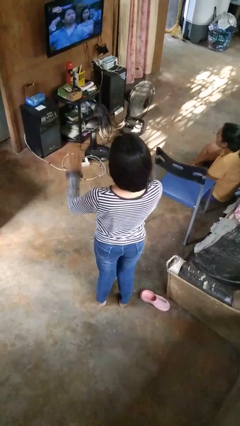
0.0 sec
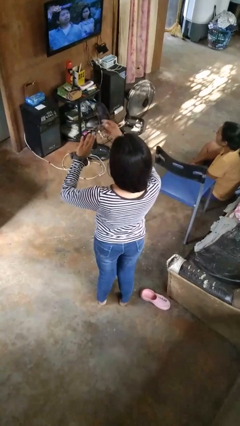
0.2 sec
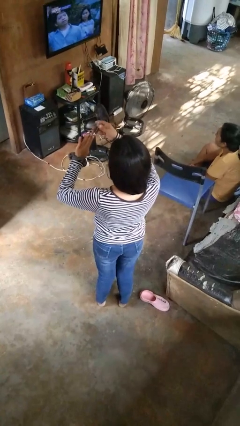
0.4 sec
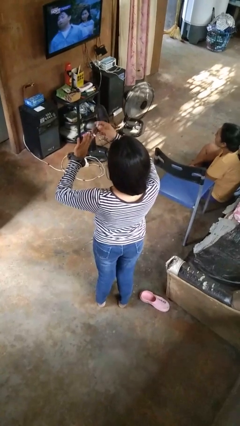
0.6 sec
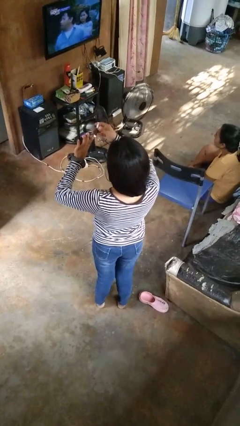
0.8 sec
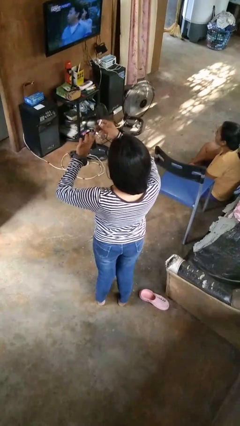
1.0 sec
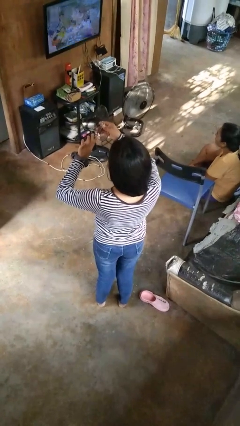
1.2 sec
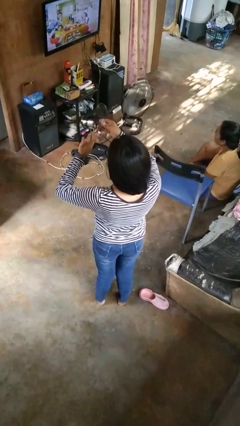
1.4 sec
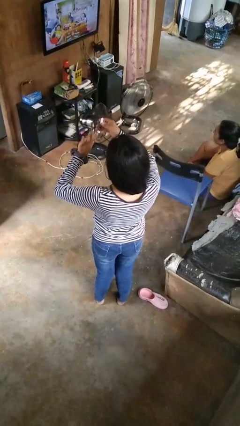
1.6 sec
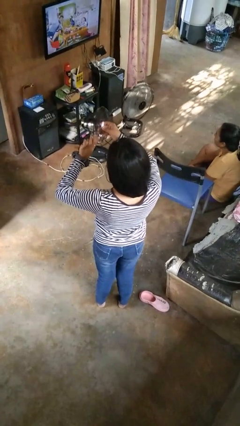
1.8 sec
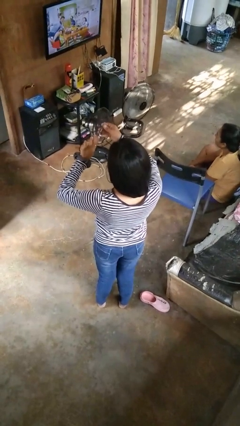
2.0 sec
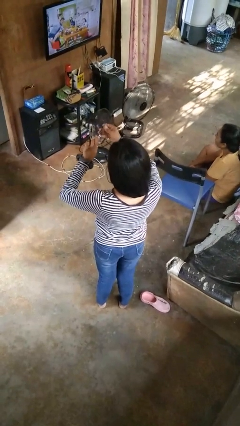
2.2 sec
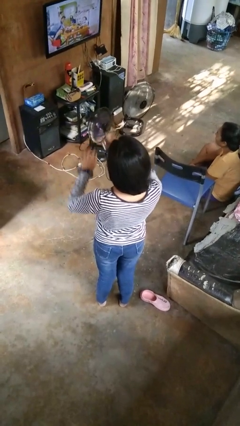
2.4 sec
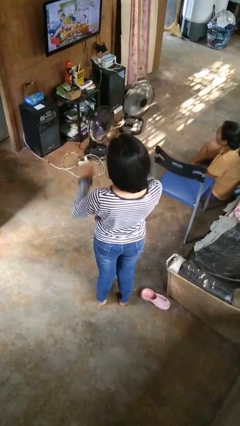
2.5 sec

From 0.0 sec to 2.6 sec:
person clips fingernails

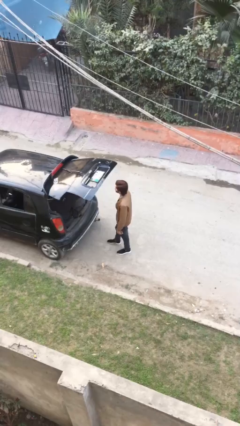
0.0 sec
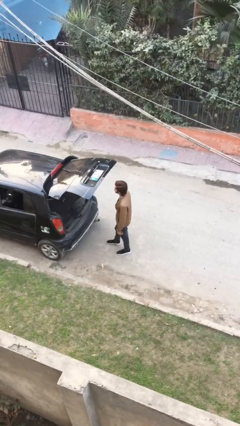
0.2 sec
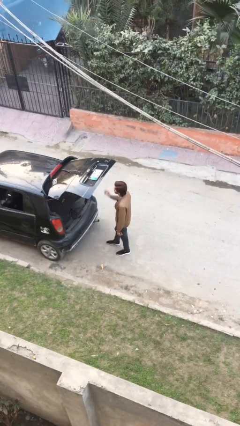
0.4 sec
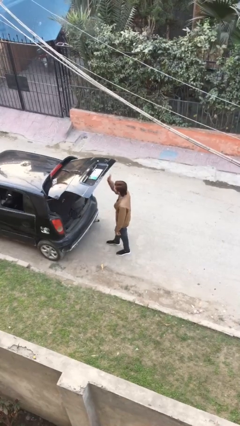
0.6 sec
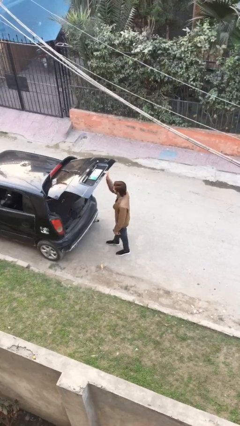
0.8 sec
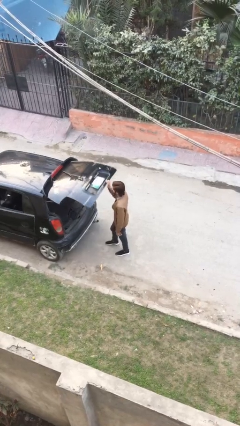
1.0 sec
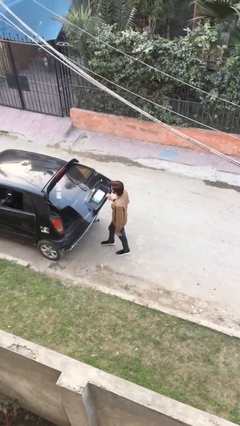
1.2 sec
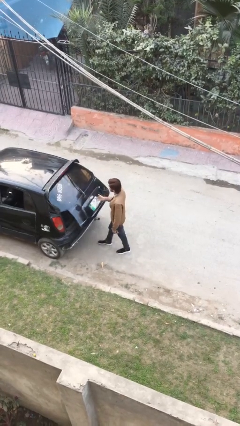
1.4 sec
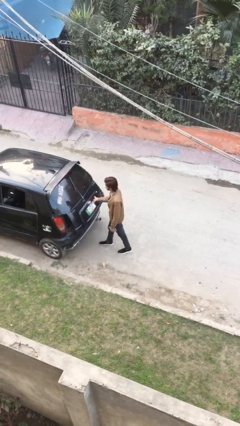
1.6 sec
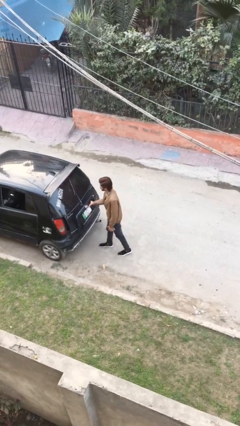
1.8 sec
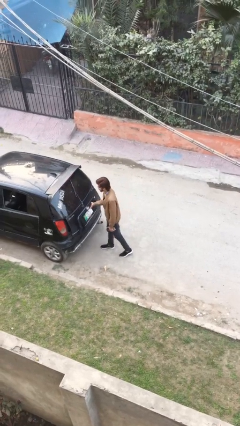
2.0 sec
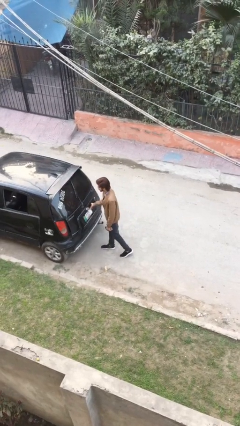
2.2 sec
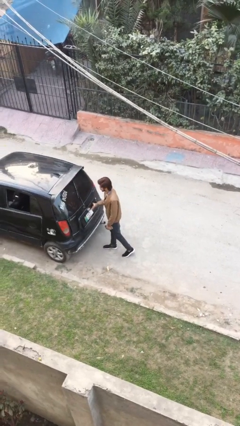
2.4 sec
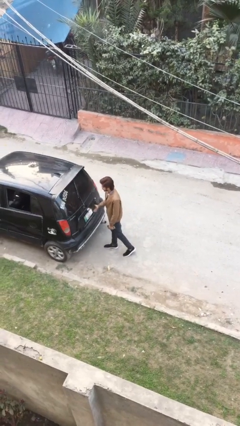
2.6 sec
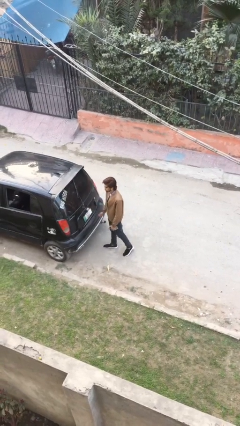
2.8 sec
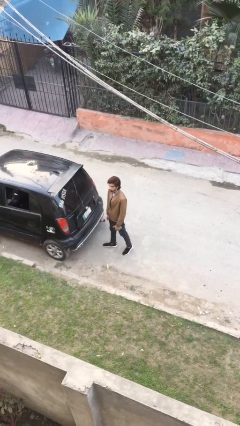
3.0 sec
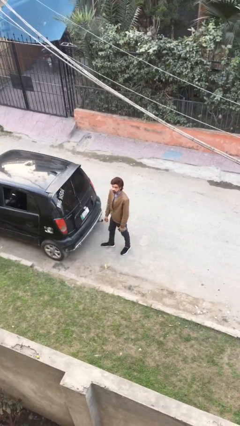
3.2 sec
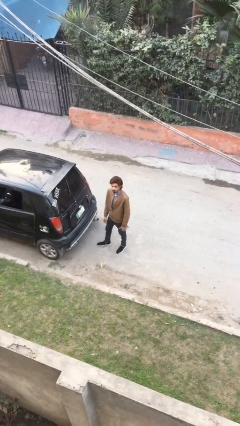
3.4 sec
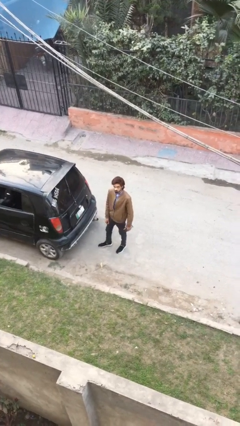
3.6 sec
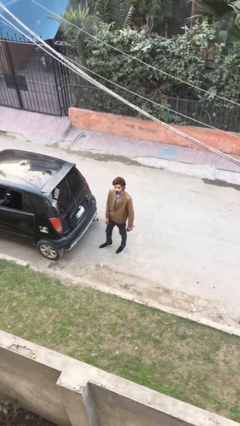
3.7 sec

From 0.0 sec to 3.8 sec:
person closes car trunk

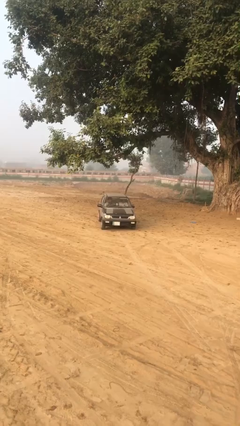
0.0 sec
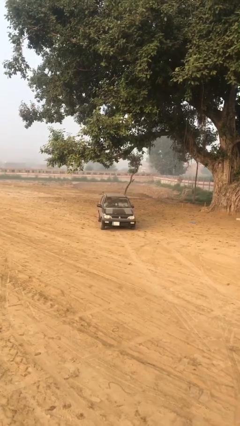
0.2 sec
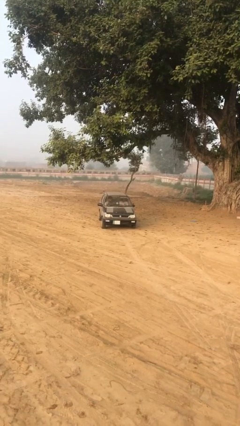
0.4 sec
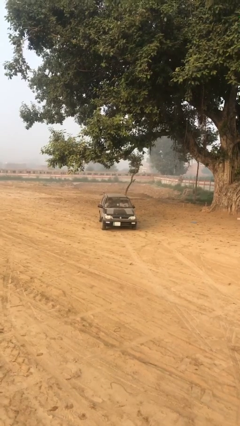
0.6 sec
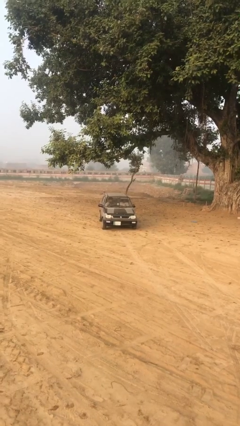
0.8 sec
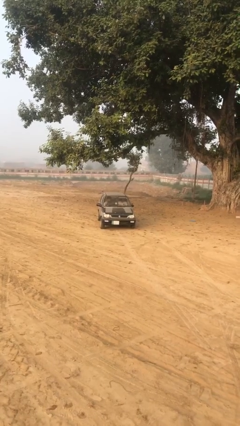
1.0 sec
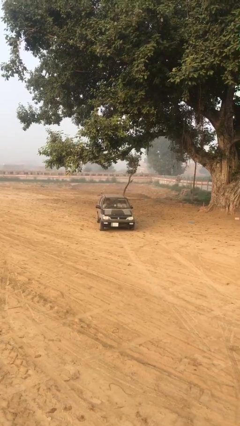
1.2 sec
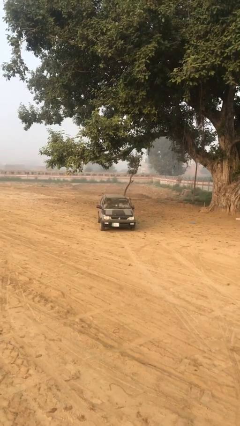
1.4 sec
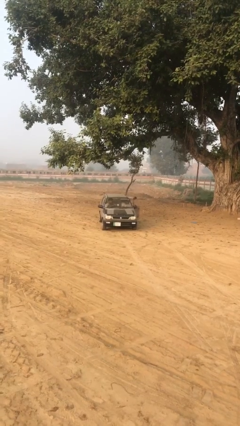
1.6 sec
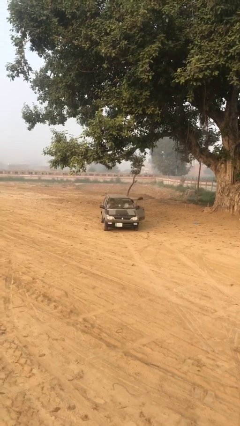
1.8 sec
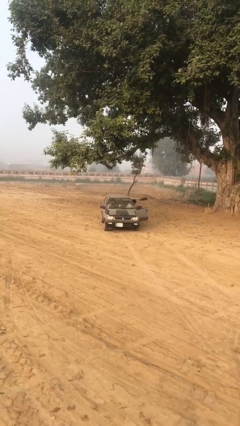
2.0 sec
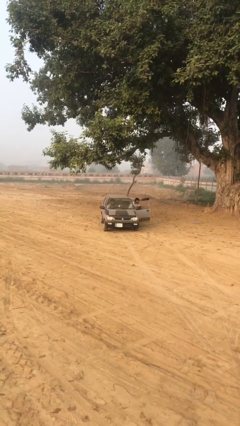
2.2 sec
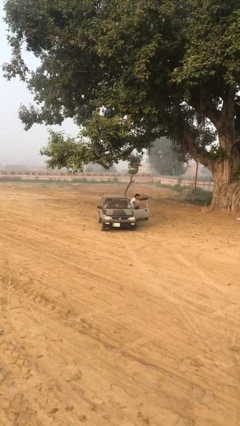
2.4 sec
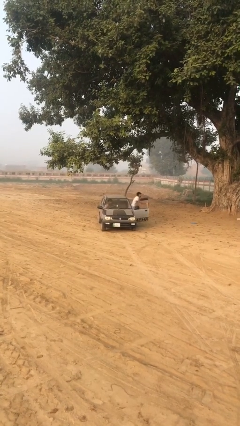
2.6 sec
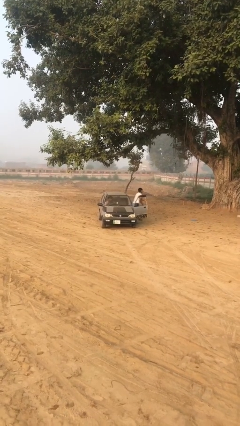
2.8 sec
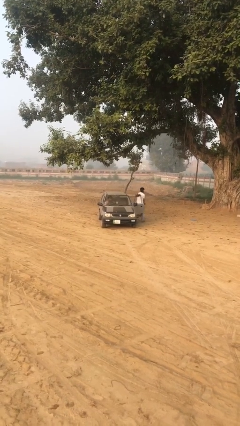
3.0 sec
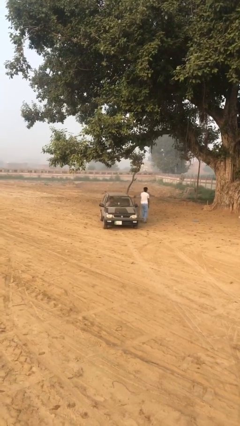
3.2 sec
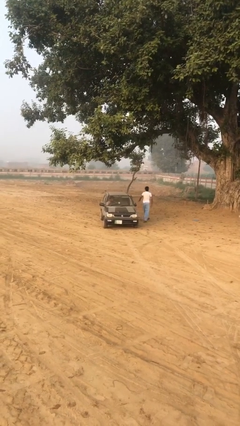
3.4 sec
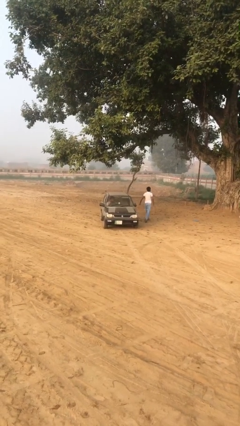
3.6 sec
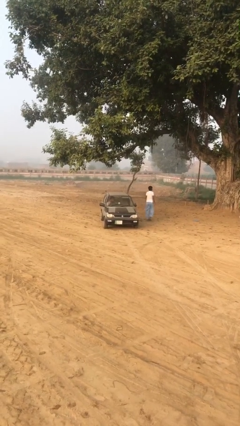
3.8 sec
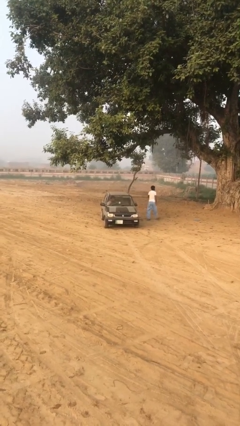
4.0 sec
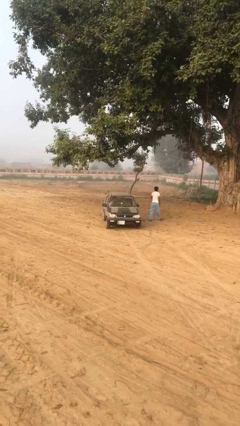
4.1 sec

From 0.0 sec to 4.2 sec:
car drops off person

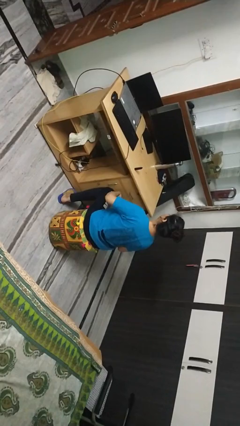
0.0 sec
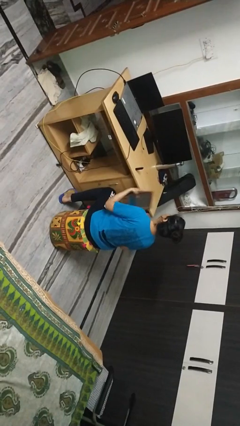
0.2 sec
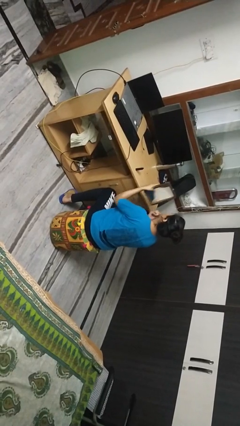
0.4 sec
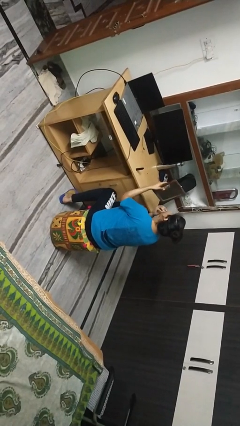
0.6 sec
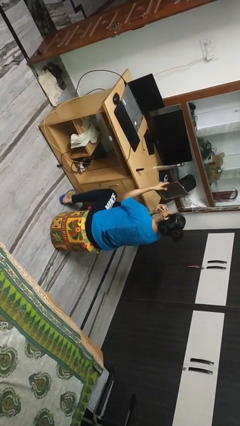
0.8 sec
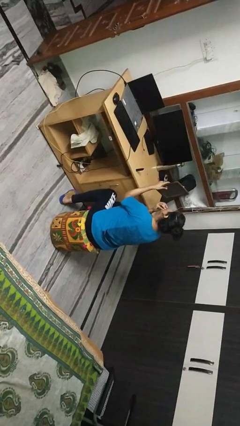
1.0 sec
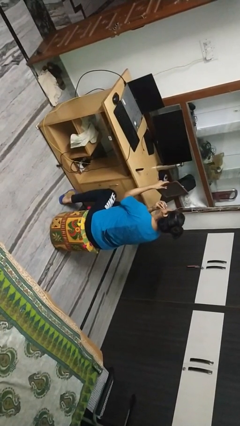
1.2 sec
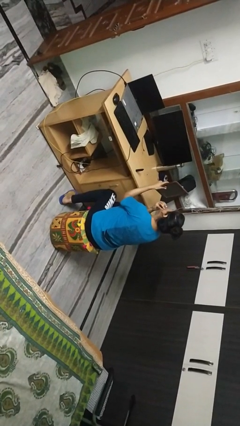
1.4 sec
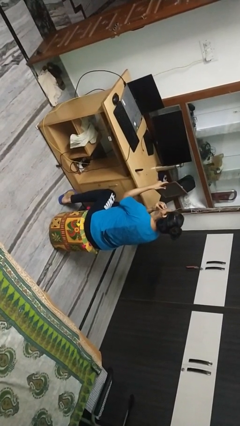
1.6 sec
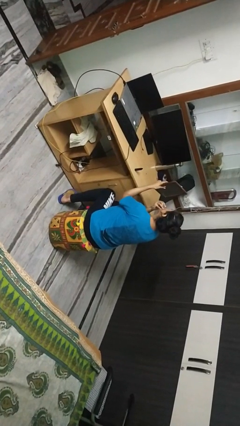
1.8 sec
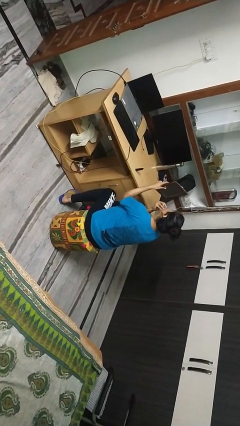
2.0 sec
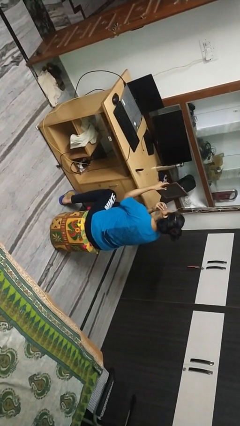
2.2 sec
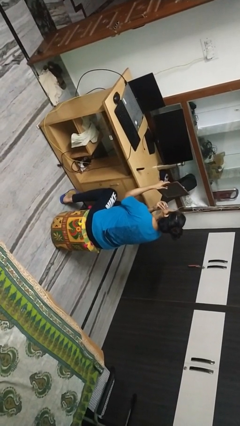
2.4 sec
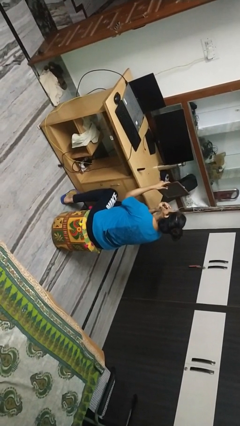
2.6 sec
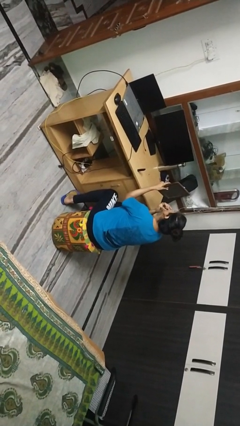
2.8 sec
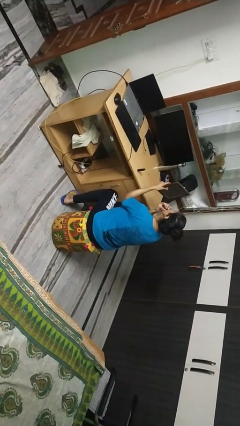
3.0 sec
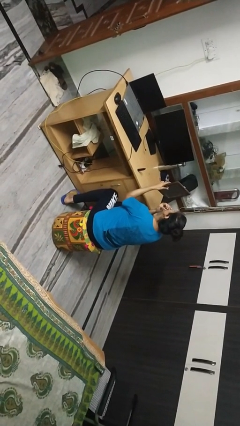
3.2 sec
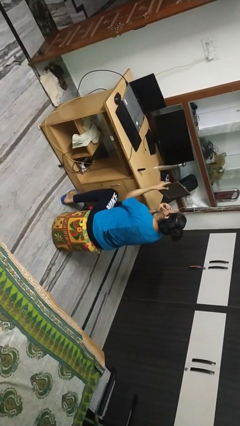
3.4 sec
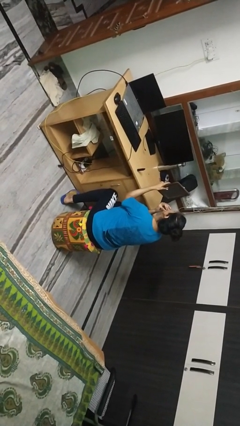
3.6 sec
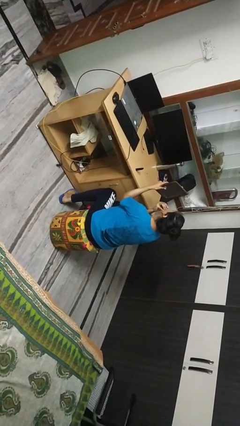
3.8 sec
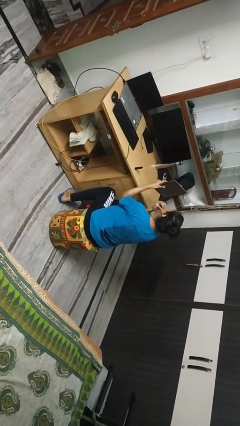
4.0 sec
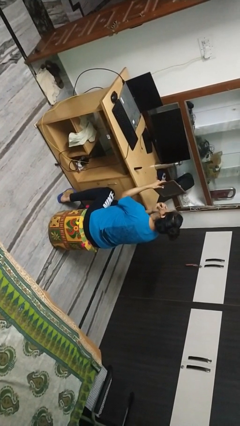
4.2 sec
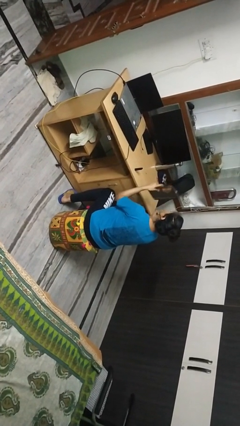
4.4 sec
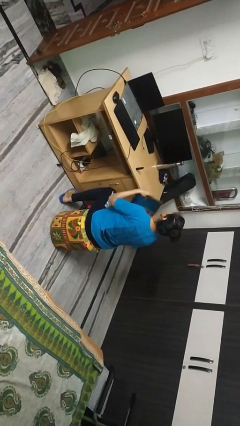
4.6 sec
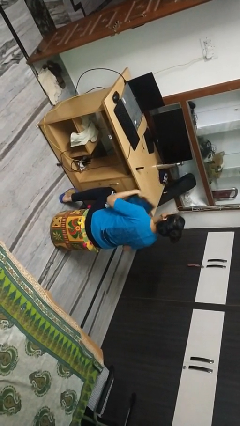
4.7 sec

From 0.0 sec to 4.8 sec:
person applies lip makeup

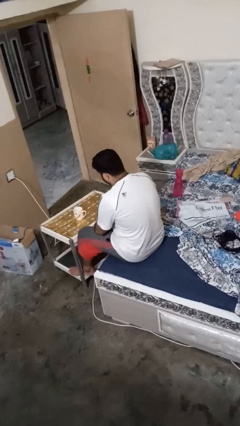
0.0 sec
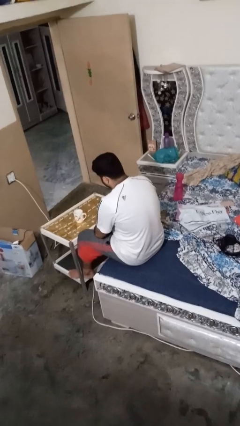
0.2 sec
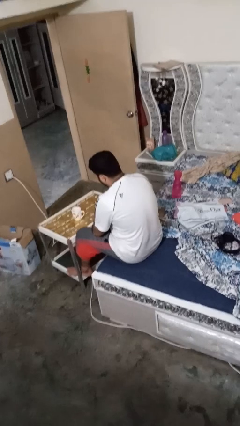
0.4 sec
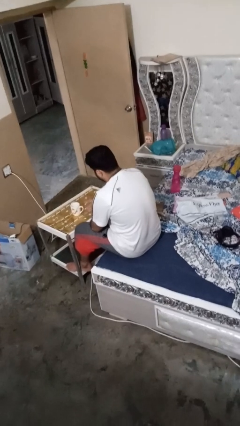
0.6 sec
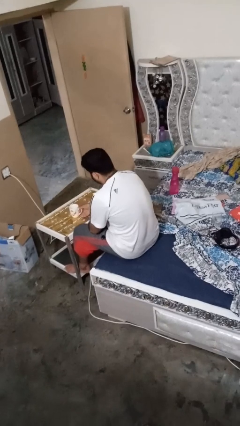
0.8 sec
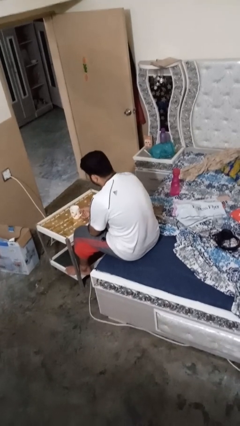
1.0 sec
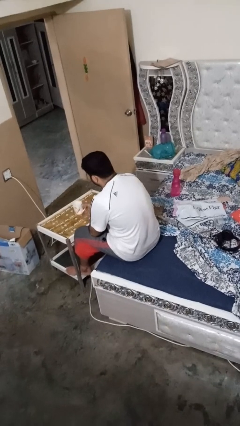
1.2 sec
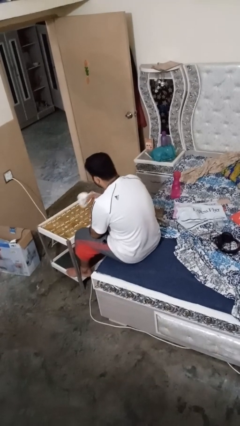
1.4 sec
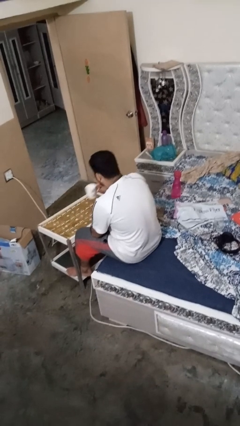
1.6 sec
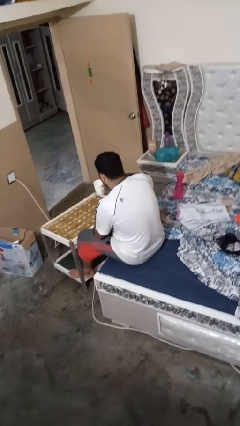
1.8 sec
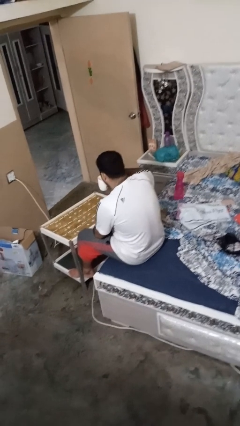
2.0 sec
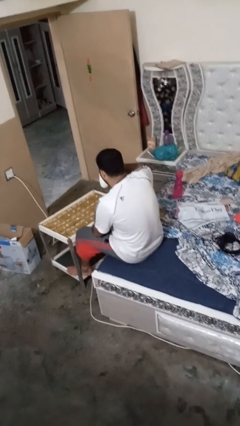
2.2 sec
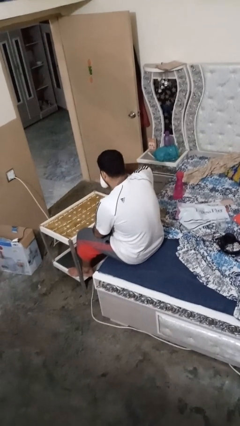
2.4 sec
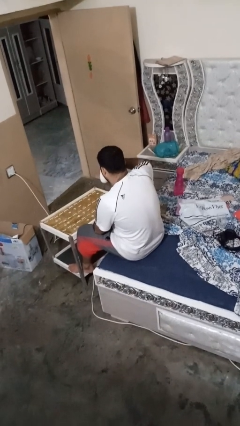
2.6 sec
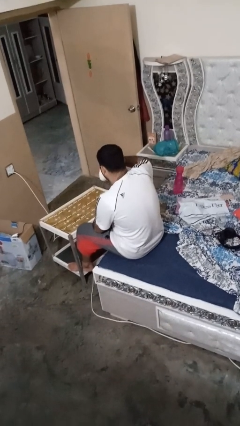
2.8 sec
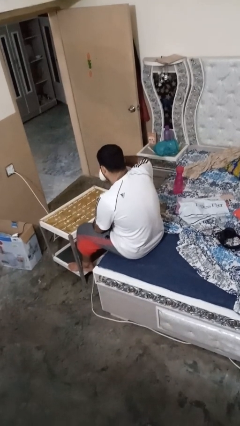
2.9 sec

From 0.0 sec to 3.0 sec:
person picks up object from table
